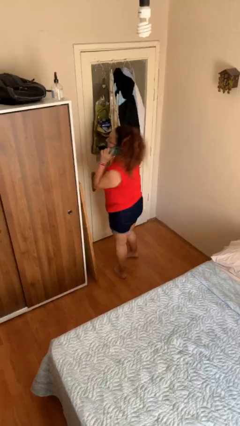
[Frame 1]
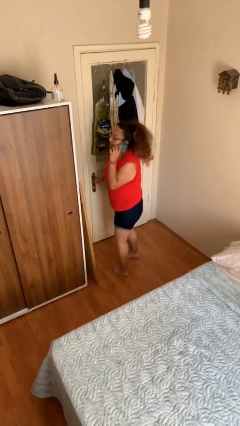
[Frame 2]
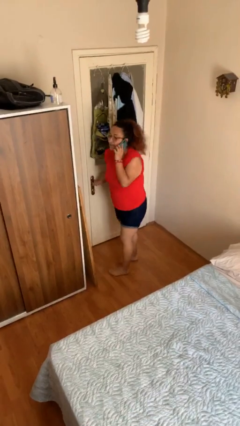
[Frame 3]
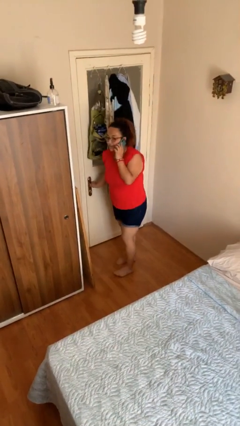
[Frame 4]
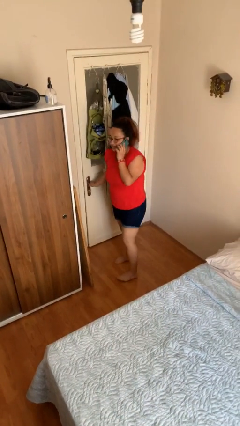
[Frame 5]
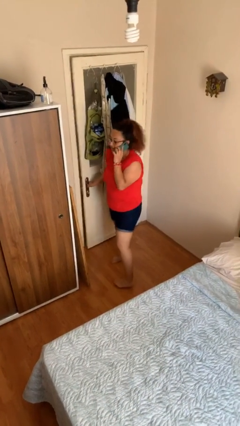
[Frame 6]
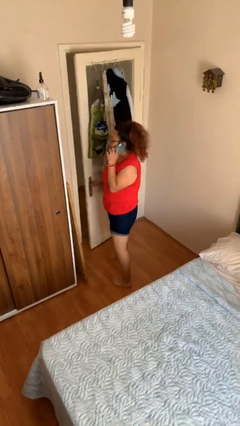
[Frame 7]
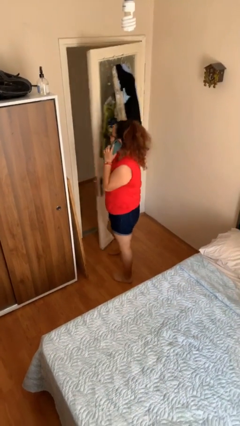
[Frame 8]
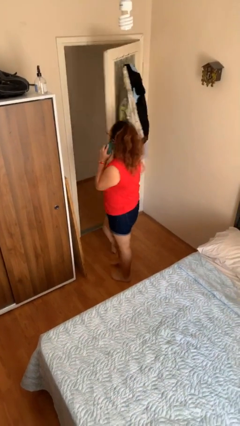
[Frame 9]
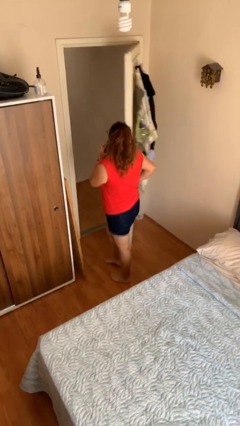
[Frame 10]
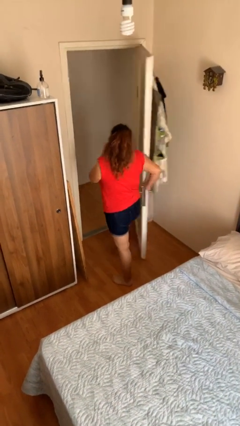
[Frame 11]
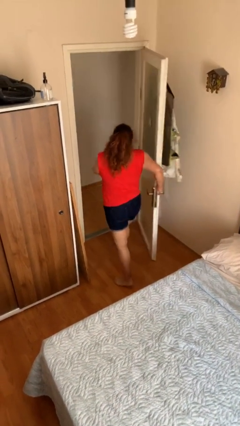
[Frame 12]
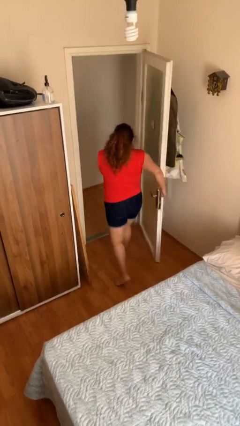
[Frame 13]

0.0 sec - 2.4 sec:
person opens facility door

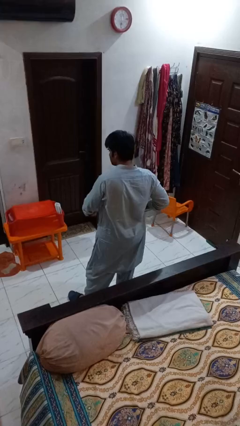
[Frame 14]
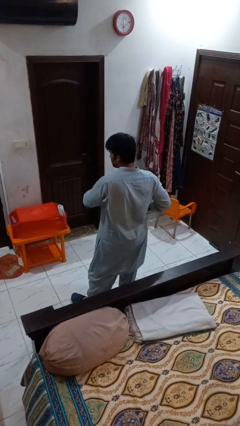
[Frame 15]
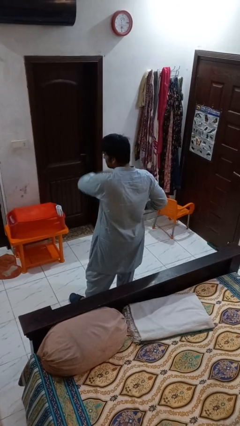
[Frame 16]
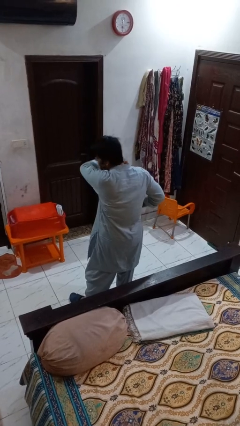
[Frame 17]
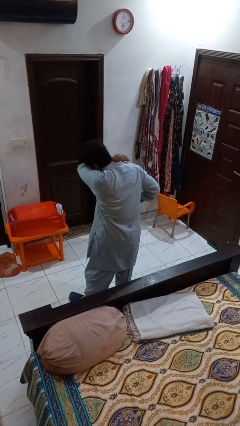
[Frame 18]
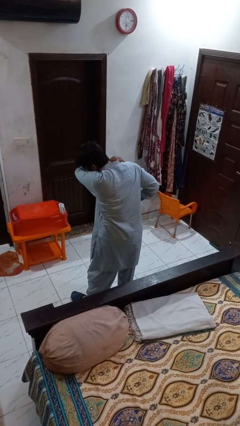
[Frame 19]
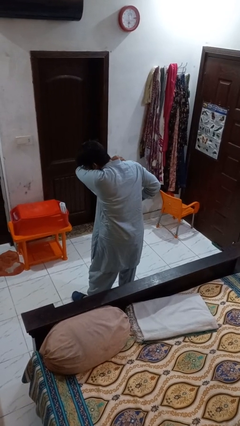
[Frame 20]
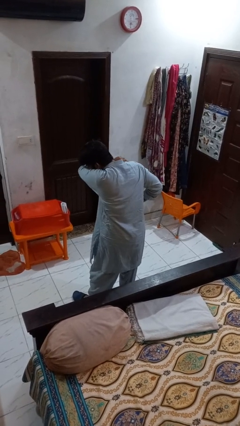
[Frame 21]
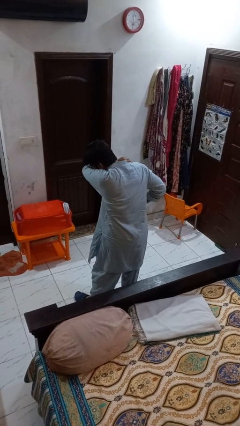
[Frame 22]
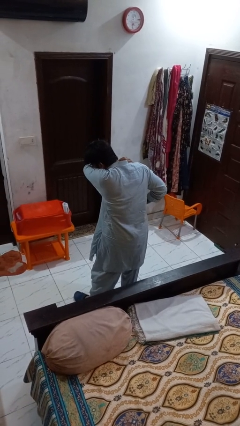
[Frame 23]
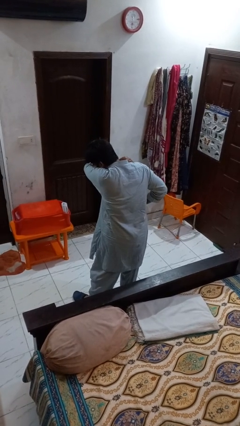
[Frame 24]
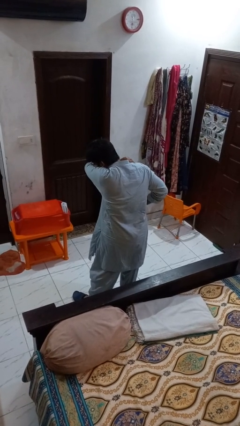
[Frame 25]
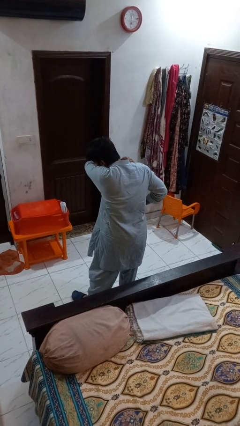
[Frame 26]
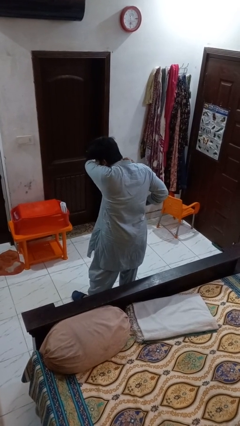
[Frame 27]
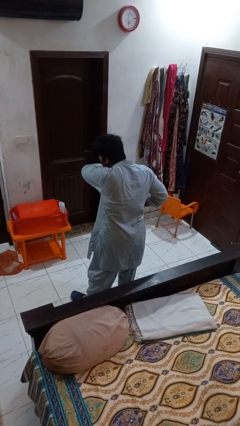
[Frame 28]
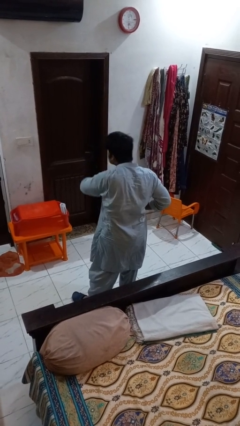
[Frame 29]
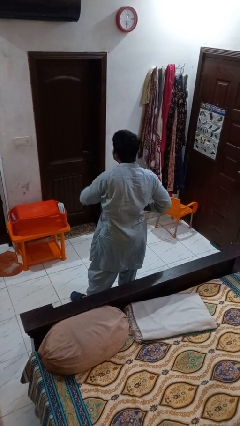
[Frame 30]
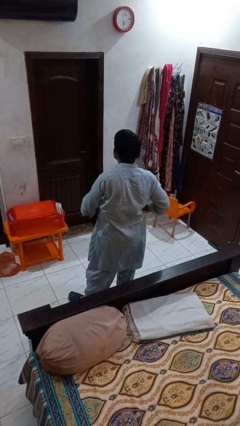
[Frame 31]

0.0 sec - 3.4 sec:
person sneezes into arm

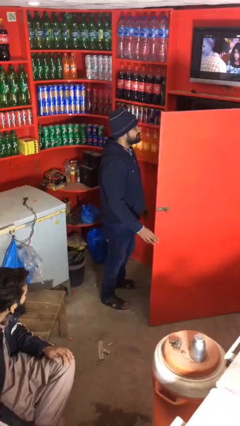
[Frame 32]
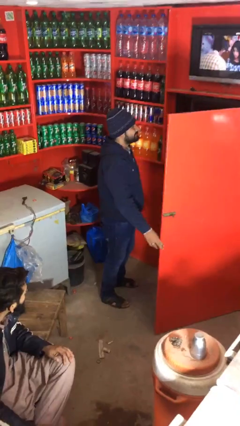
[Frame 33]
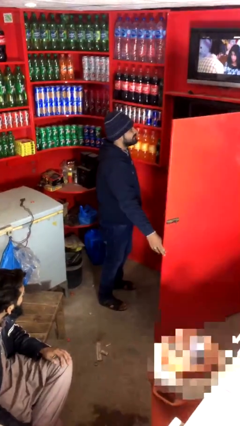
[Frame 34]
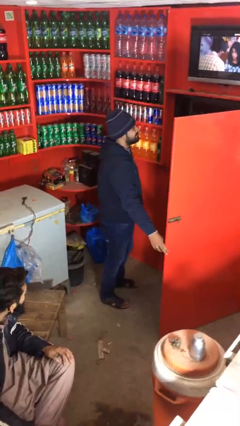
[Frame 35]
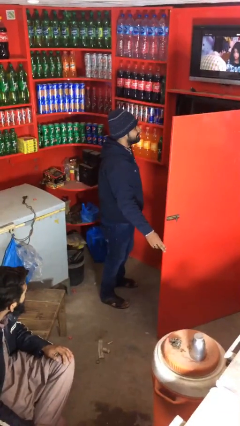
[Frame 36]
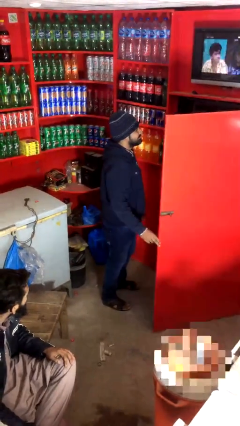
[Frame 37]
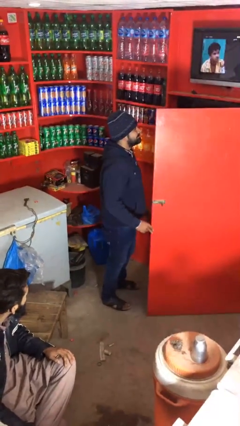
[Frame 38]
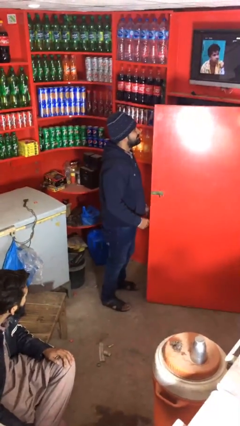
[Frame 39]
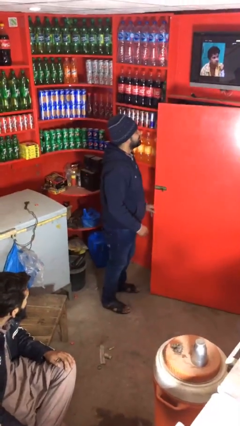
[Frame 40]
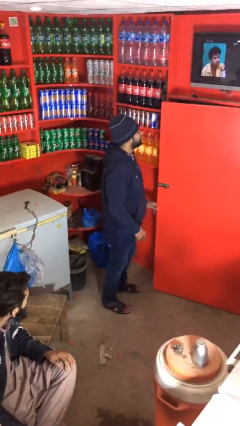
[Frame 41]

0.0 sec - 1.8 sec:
person closes facility door

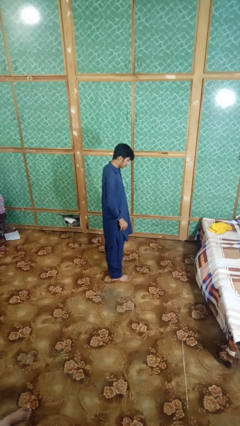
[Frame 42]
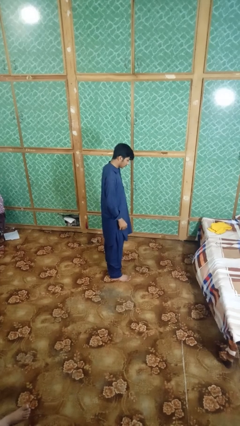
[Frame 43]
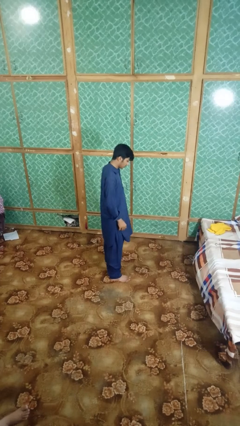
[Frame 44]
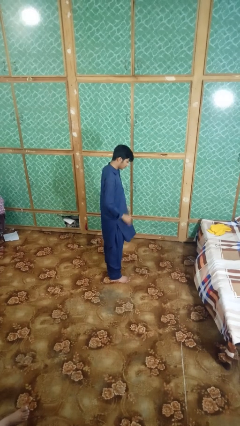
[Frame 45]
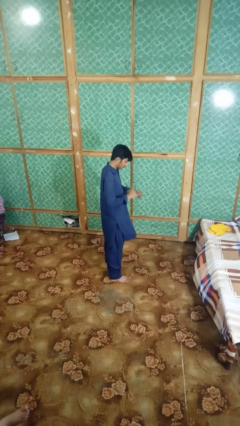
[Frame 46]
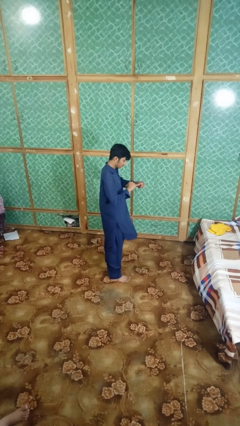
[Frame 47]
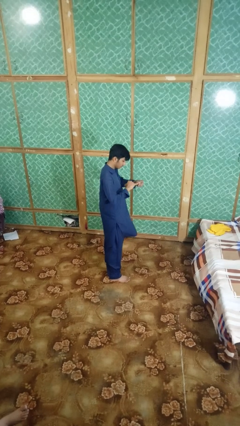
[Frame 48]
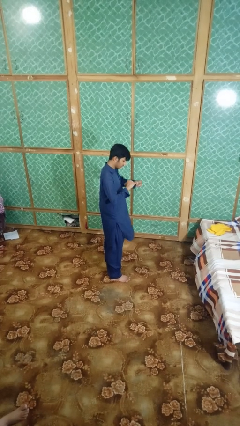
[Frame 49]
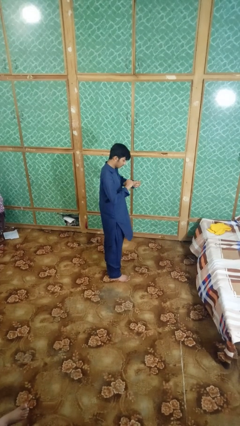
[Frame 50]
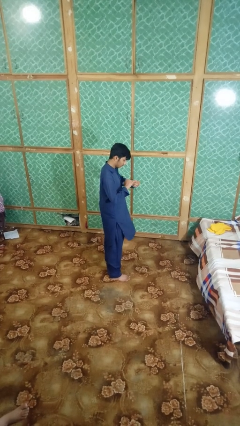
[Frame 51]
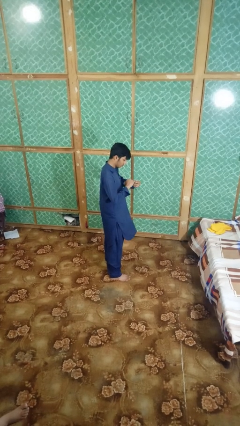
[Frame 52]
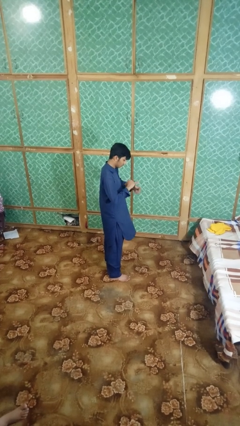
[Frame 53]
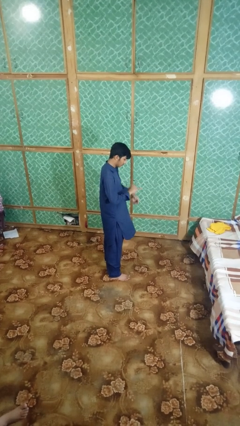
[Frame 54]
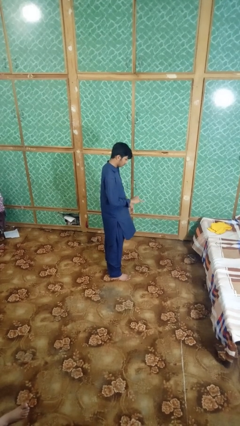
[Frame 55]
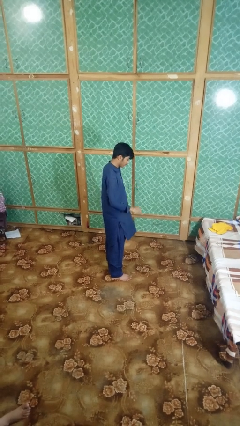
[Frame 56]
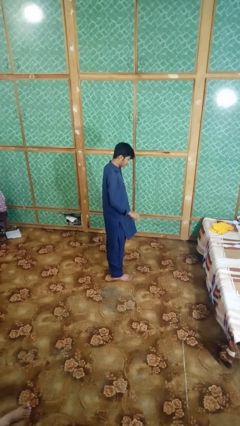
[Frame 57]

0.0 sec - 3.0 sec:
person puts on ring

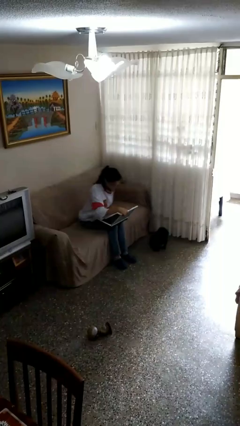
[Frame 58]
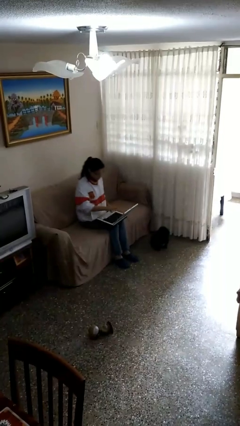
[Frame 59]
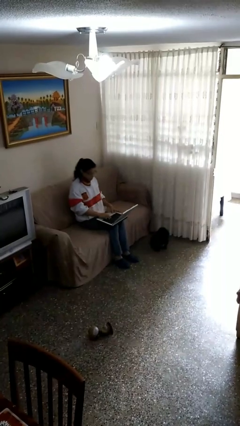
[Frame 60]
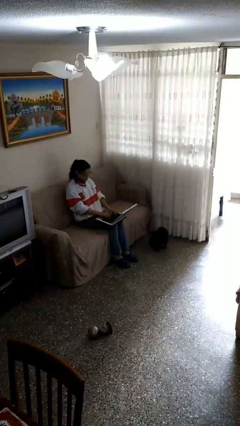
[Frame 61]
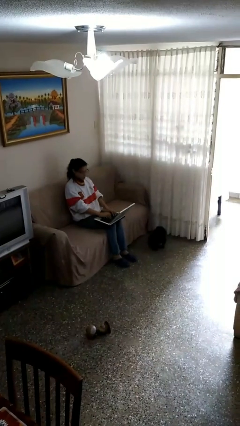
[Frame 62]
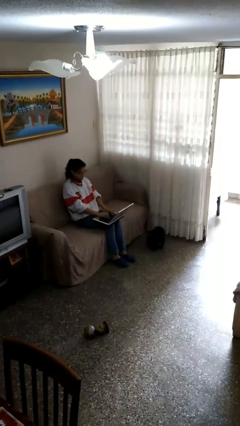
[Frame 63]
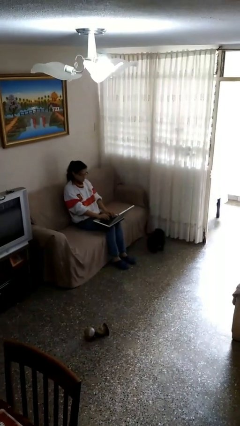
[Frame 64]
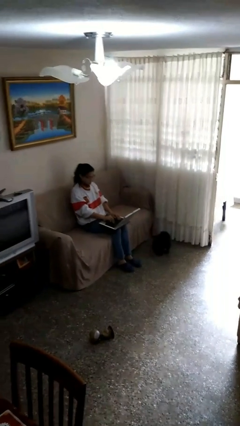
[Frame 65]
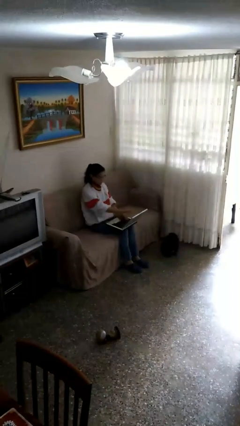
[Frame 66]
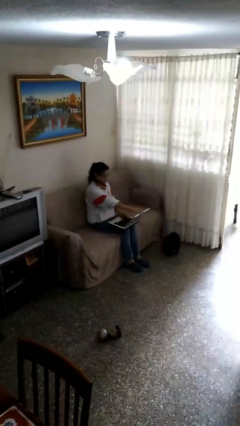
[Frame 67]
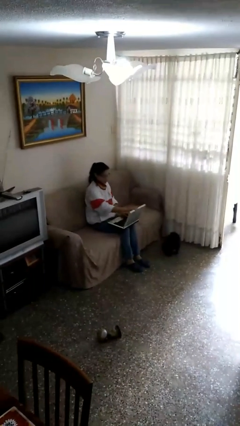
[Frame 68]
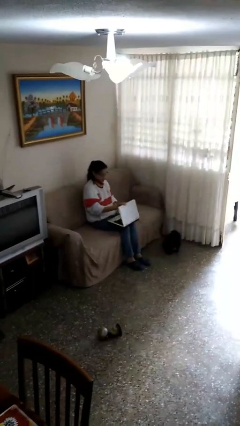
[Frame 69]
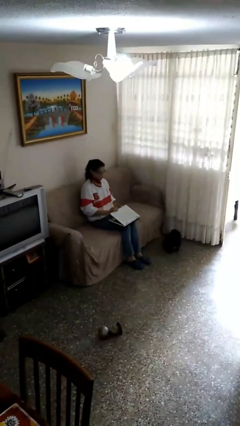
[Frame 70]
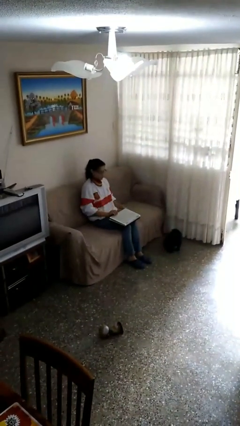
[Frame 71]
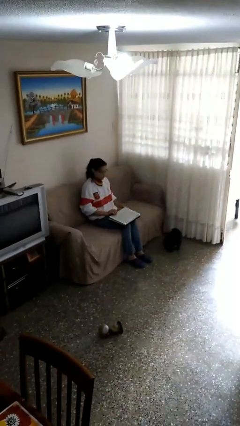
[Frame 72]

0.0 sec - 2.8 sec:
person interacts with laptop

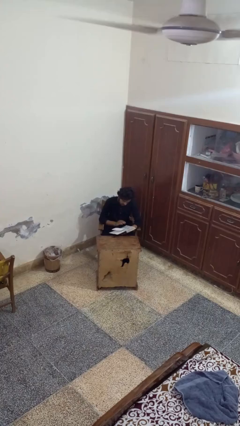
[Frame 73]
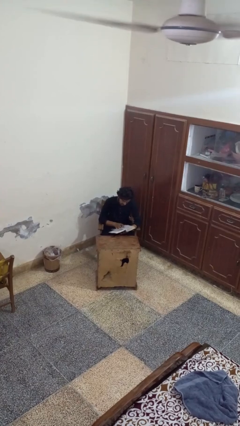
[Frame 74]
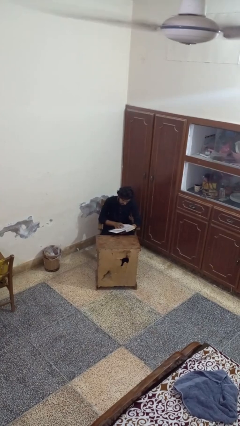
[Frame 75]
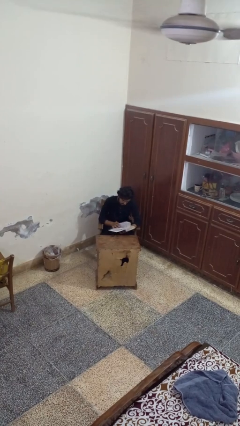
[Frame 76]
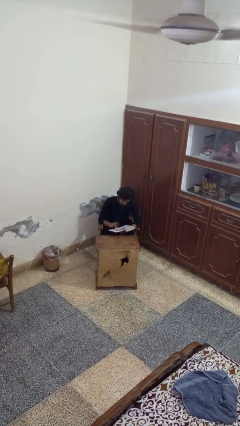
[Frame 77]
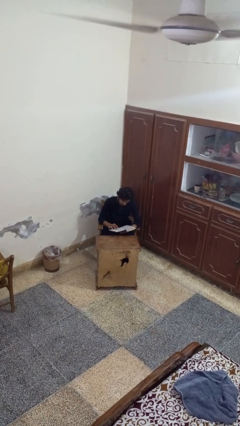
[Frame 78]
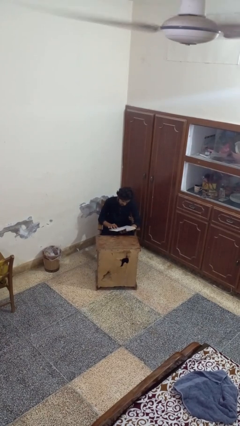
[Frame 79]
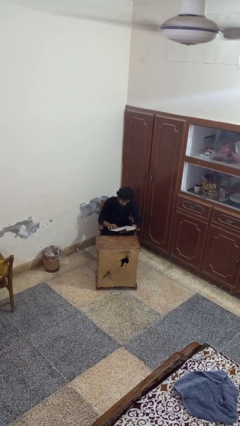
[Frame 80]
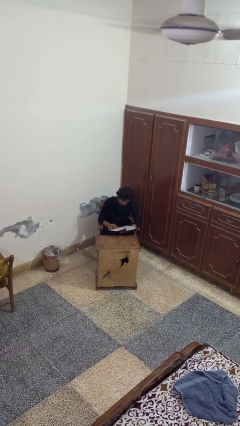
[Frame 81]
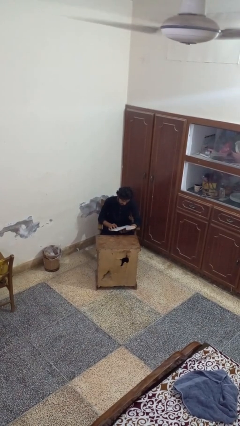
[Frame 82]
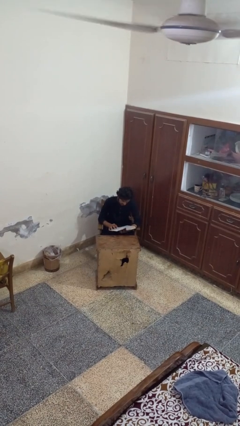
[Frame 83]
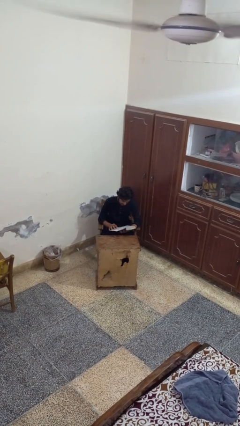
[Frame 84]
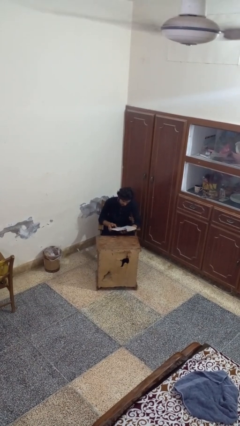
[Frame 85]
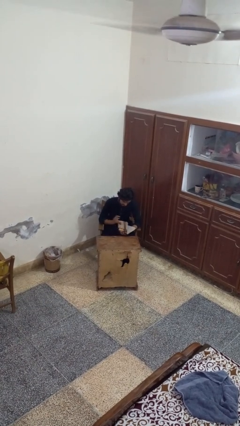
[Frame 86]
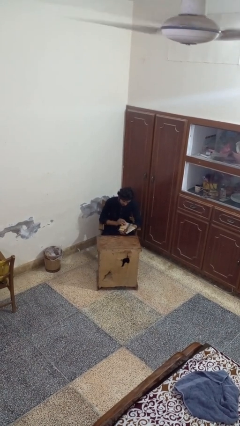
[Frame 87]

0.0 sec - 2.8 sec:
person reads book

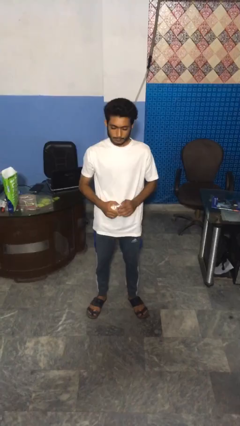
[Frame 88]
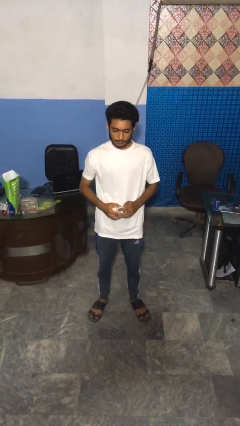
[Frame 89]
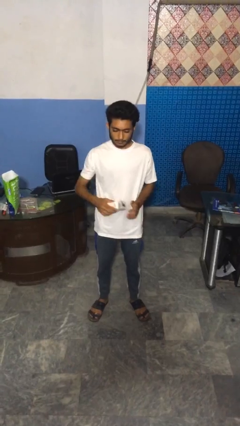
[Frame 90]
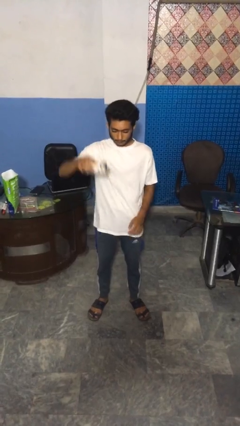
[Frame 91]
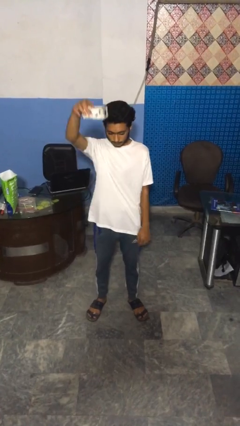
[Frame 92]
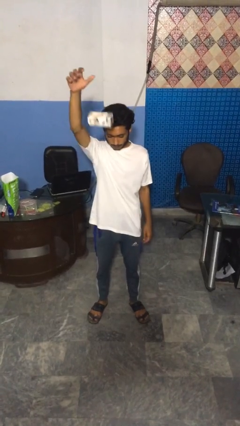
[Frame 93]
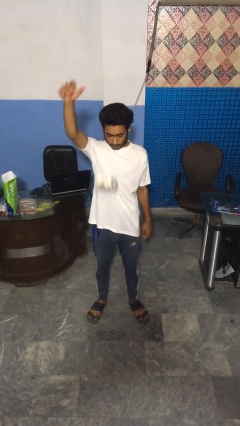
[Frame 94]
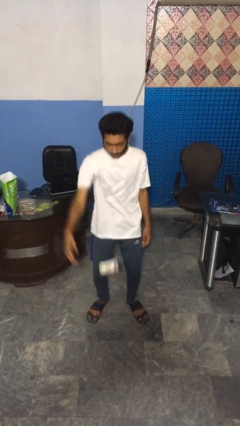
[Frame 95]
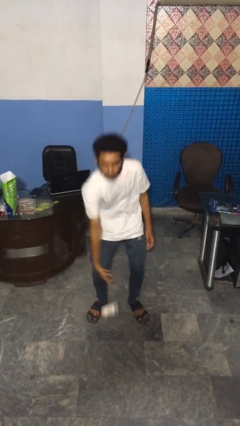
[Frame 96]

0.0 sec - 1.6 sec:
person drops object
